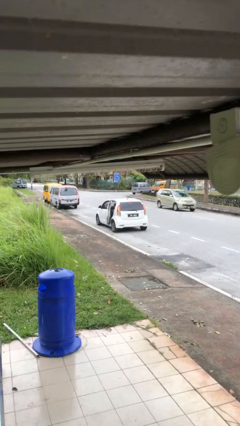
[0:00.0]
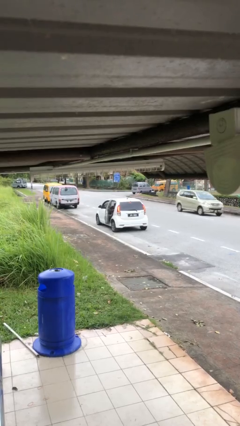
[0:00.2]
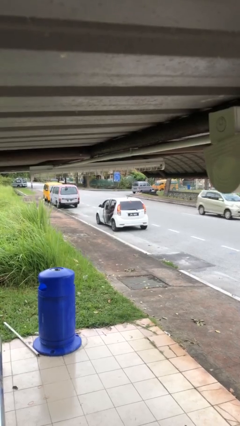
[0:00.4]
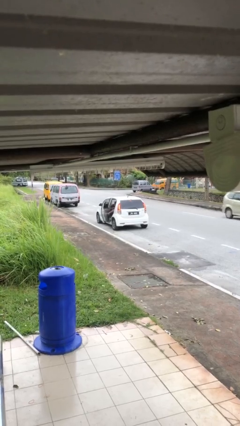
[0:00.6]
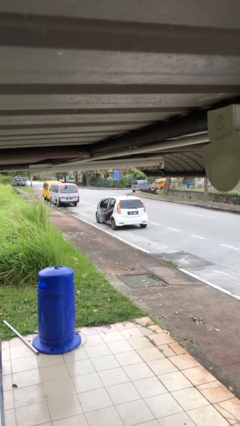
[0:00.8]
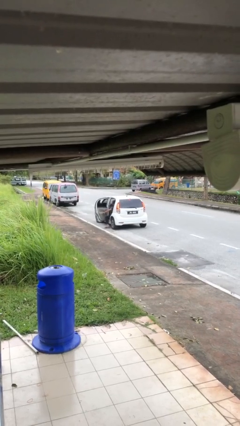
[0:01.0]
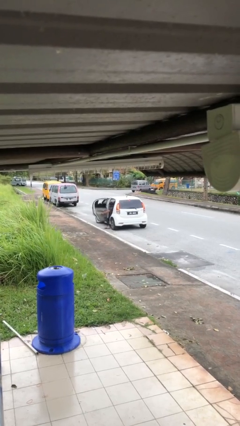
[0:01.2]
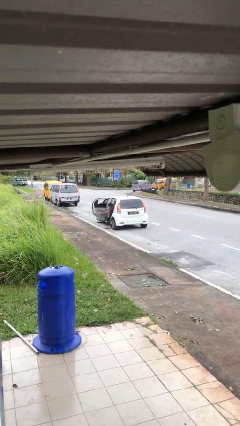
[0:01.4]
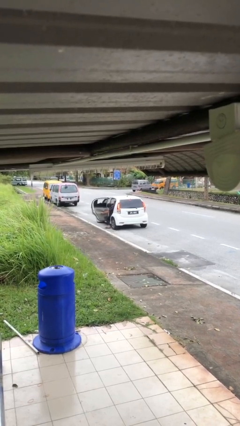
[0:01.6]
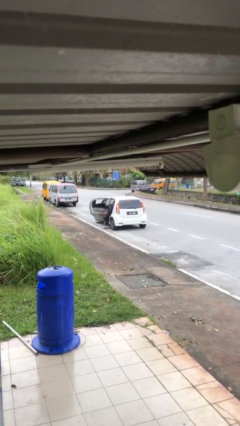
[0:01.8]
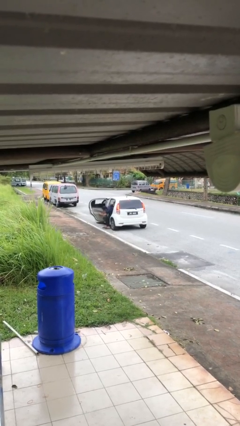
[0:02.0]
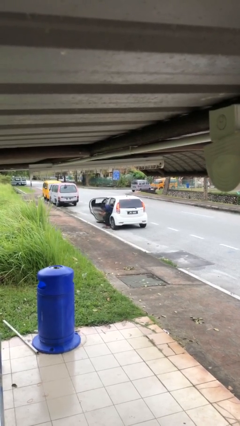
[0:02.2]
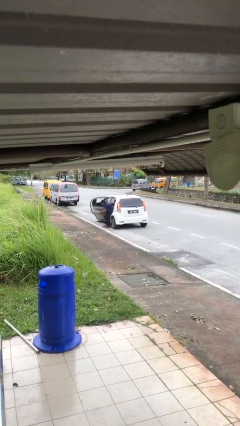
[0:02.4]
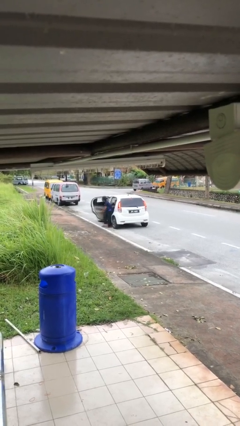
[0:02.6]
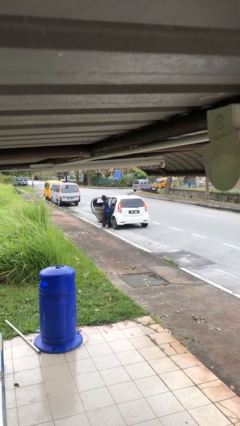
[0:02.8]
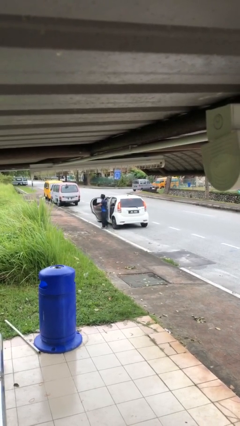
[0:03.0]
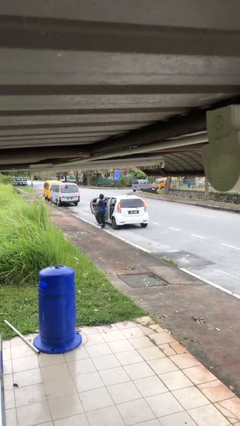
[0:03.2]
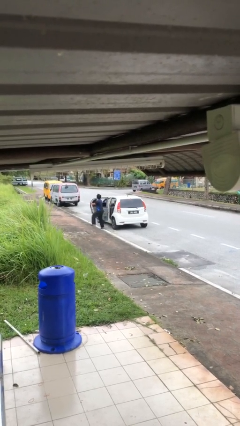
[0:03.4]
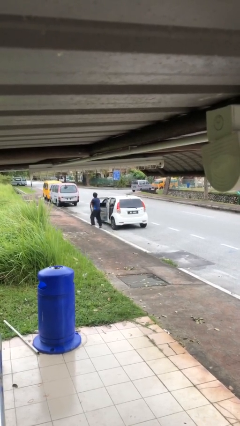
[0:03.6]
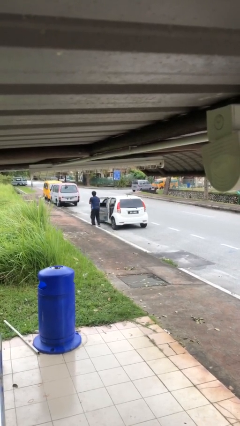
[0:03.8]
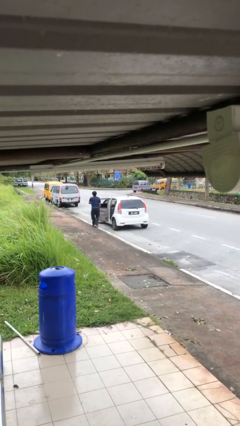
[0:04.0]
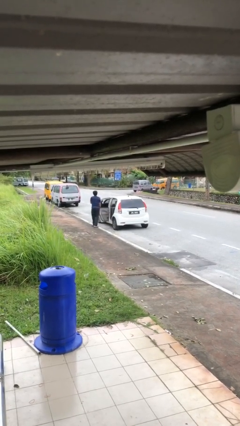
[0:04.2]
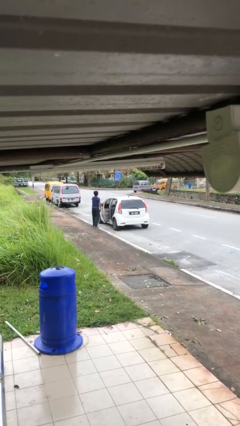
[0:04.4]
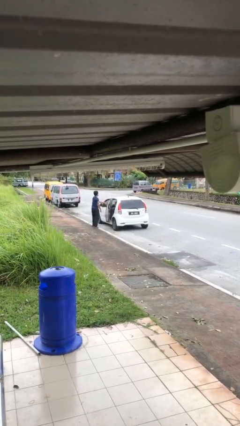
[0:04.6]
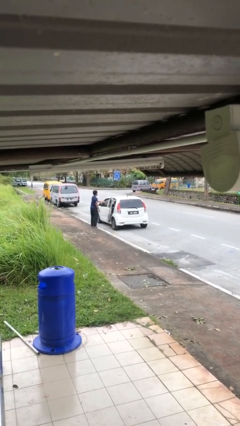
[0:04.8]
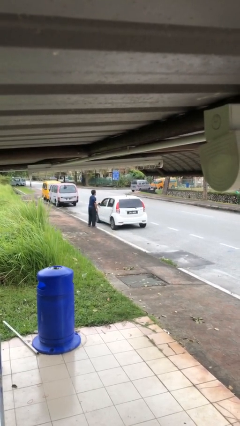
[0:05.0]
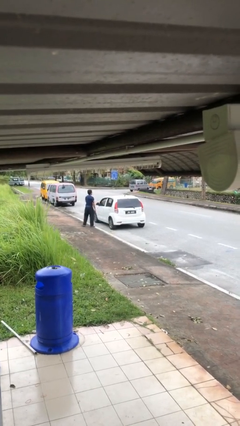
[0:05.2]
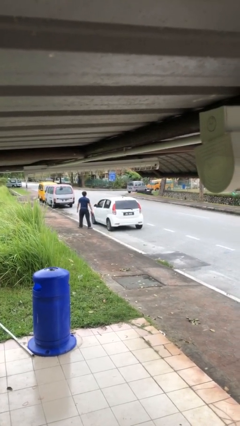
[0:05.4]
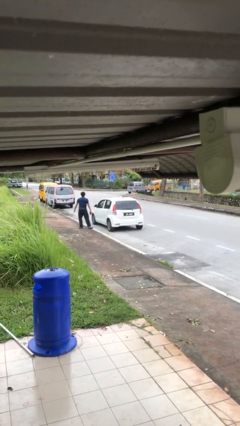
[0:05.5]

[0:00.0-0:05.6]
car drops off person

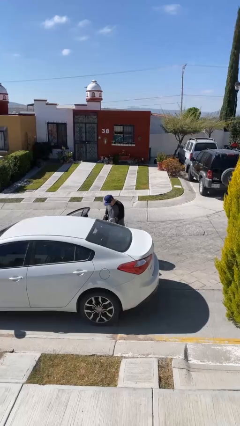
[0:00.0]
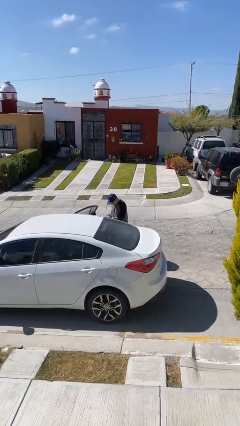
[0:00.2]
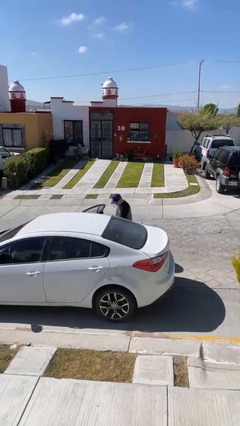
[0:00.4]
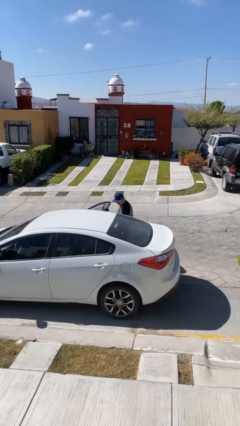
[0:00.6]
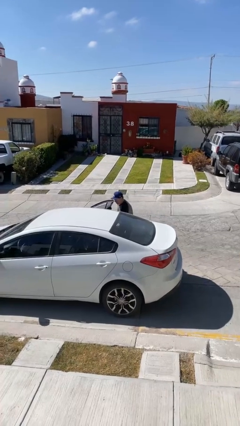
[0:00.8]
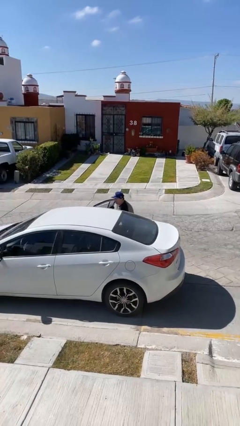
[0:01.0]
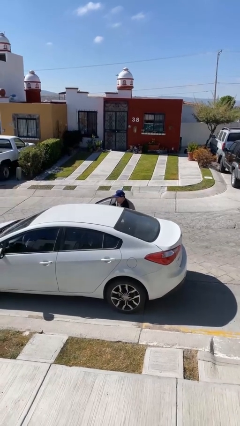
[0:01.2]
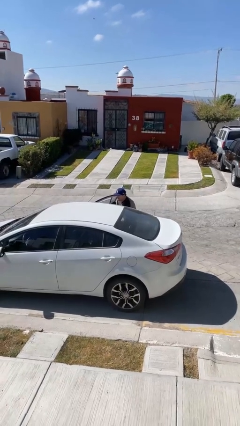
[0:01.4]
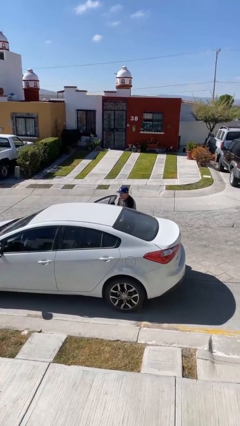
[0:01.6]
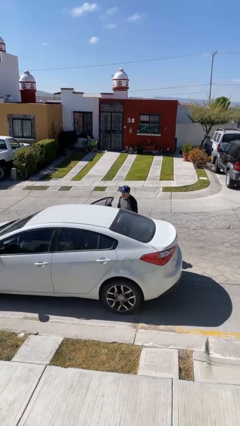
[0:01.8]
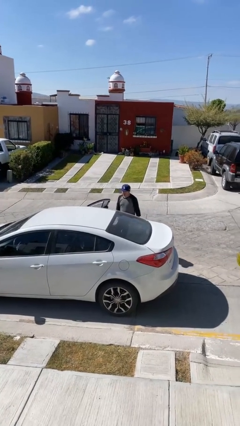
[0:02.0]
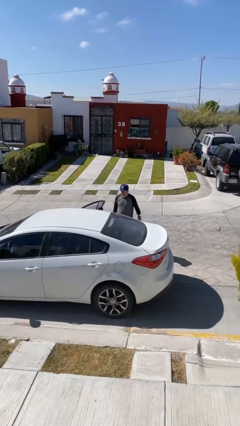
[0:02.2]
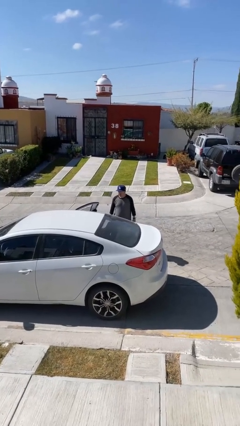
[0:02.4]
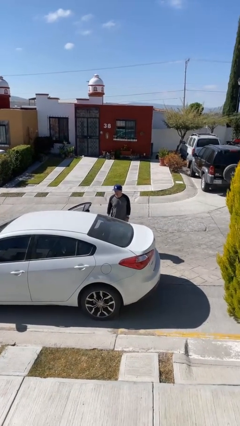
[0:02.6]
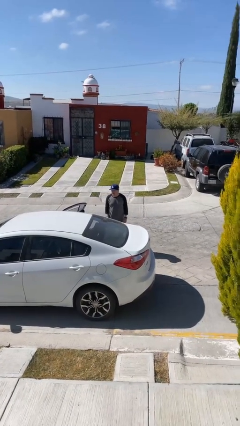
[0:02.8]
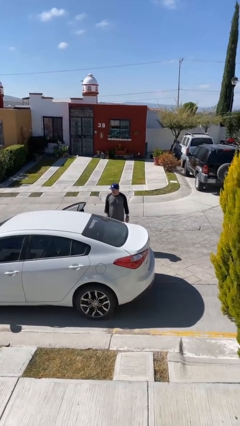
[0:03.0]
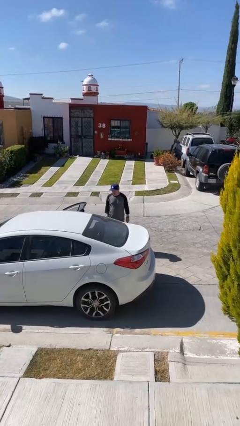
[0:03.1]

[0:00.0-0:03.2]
person loads car

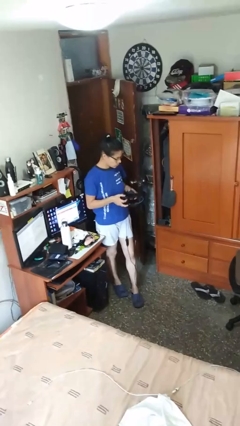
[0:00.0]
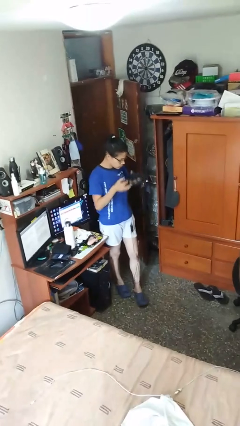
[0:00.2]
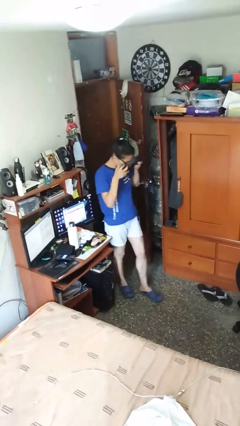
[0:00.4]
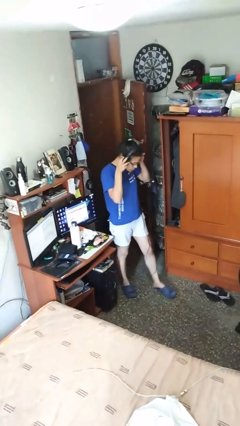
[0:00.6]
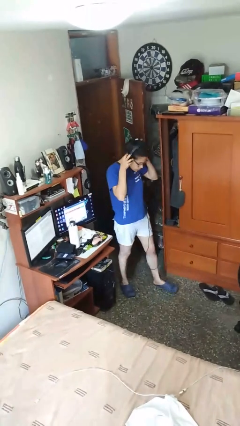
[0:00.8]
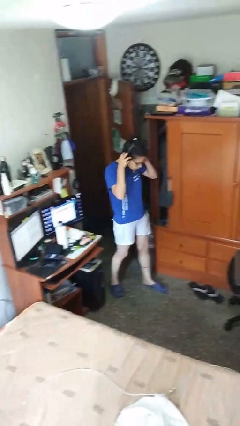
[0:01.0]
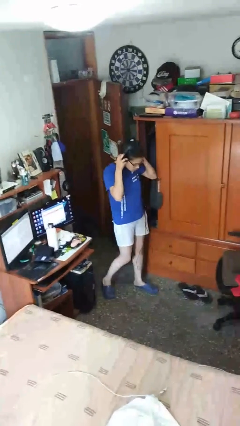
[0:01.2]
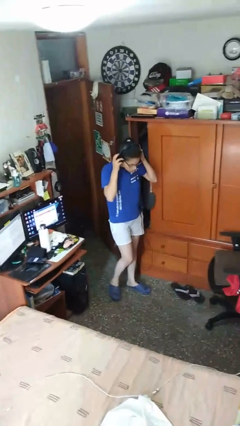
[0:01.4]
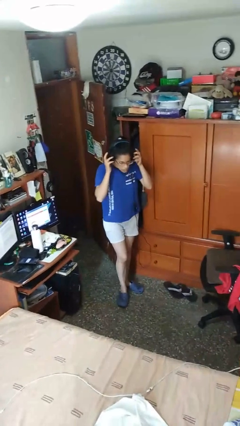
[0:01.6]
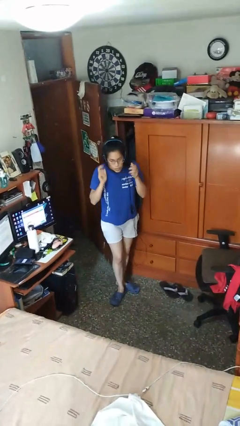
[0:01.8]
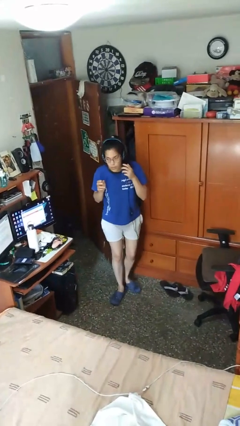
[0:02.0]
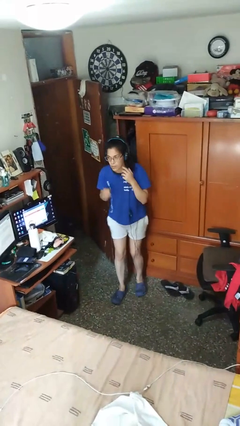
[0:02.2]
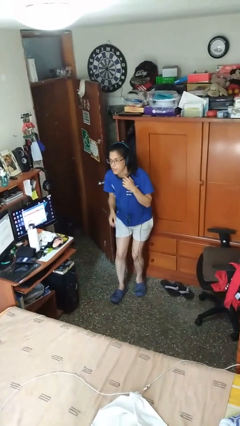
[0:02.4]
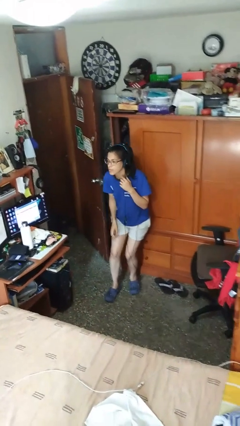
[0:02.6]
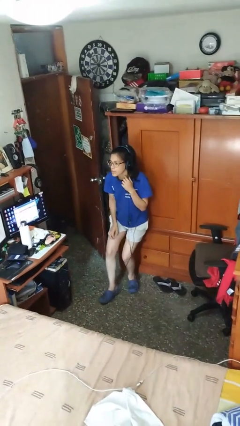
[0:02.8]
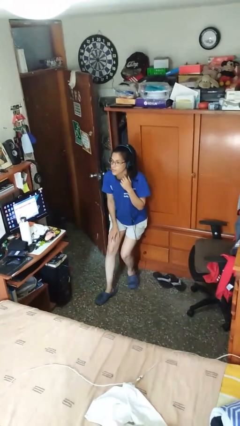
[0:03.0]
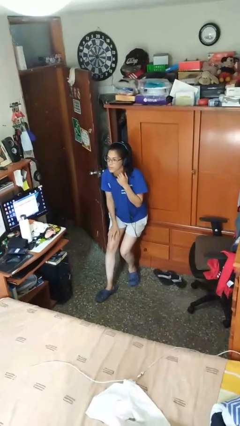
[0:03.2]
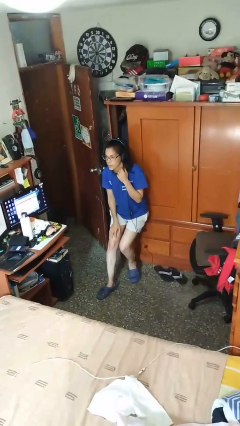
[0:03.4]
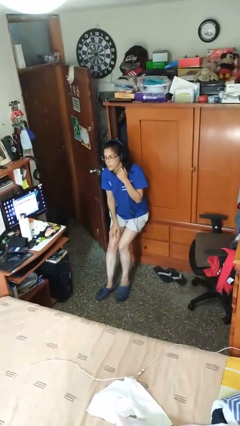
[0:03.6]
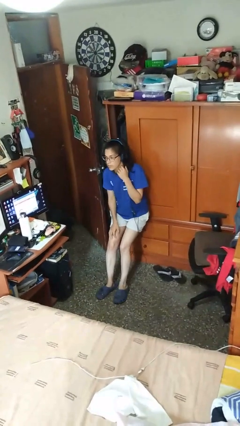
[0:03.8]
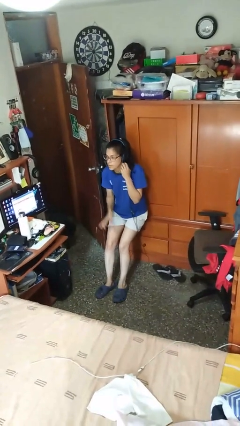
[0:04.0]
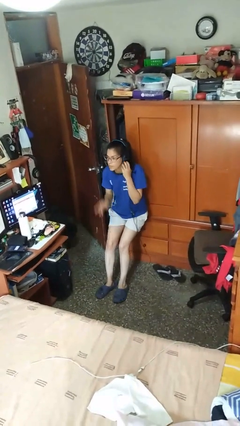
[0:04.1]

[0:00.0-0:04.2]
person puts on headphones

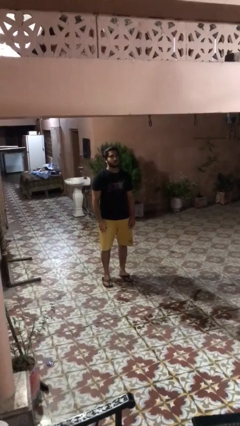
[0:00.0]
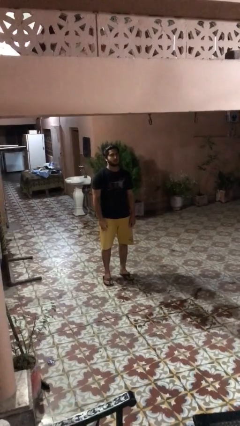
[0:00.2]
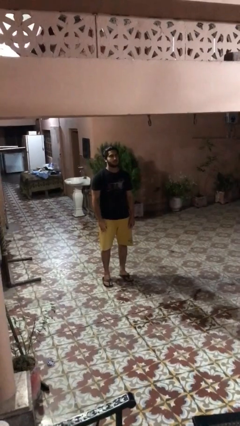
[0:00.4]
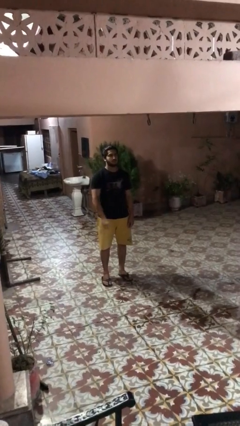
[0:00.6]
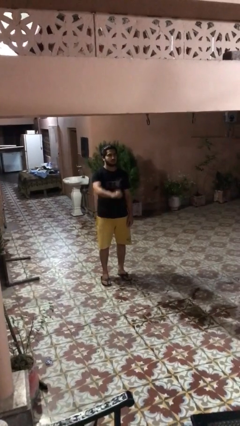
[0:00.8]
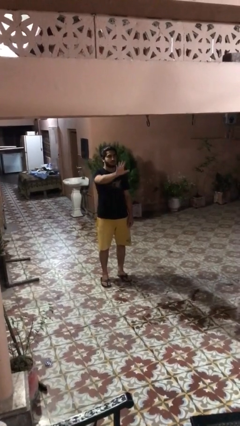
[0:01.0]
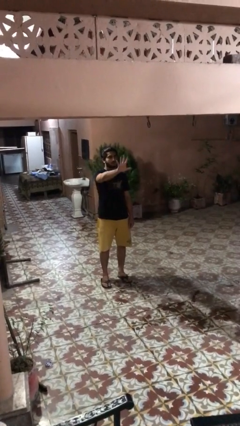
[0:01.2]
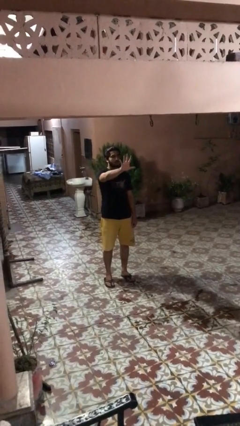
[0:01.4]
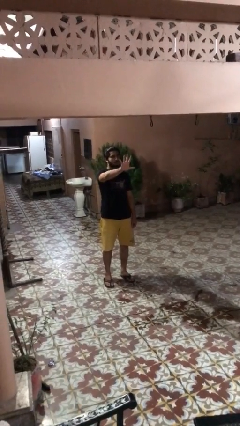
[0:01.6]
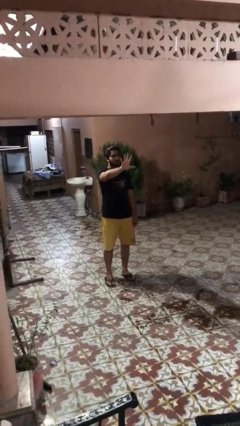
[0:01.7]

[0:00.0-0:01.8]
person gestures number five

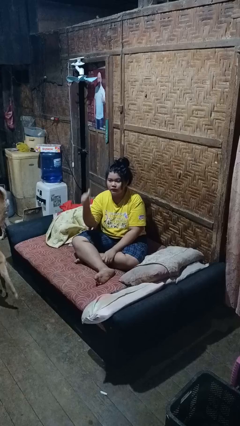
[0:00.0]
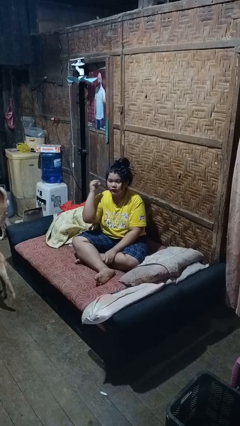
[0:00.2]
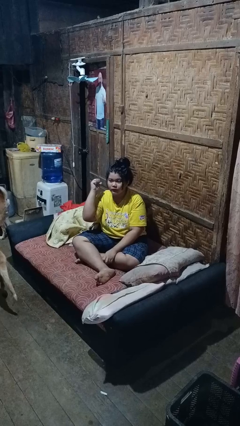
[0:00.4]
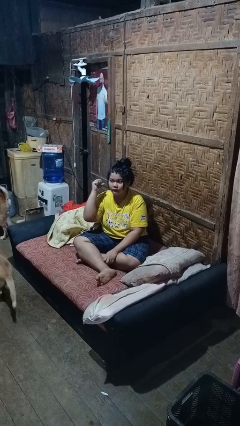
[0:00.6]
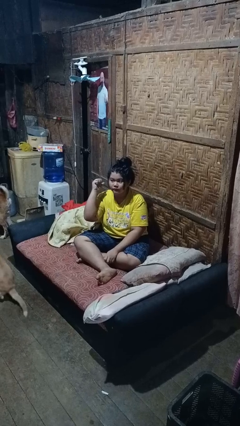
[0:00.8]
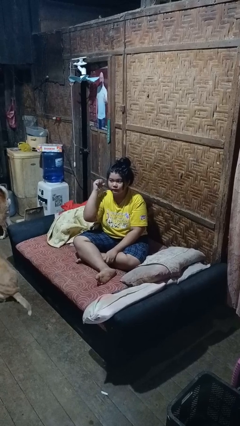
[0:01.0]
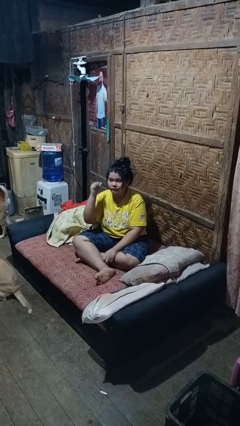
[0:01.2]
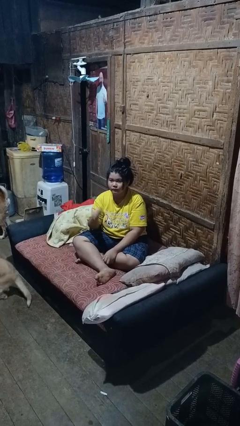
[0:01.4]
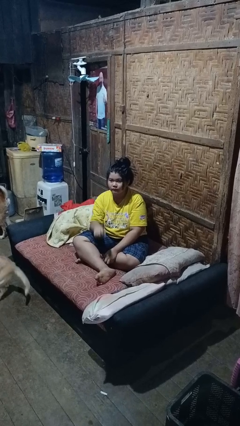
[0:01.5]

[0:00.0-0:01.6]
person gestures behind me

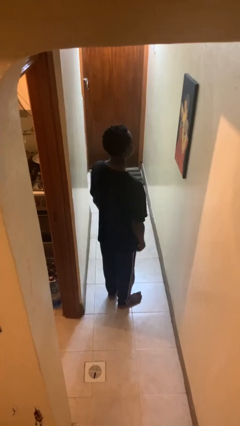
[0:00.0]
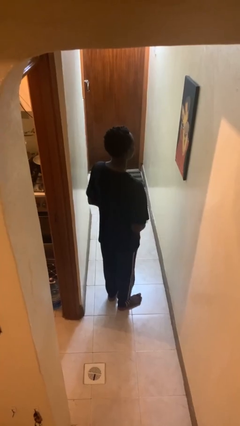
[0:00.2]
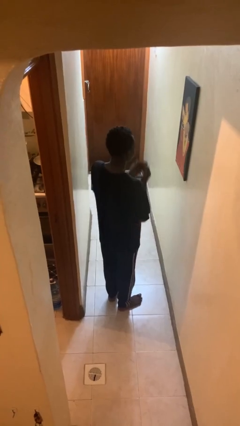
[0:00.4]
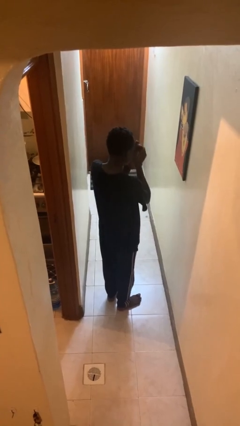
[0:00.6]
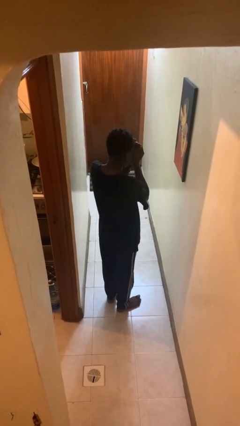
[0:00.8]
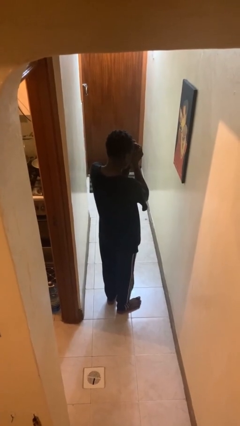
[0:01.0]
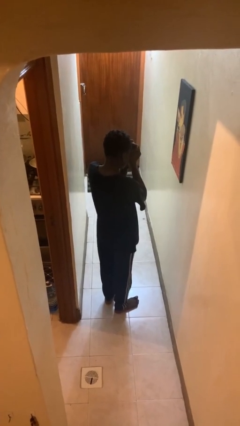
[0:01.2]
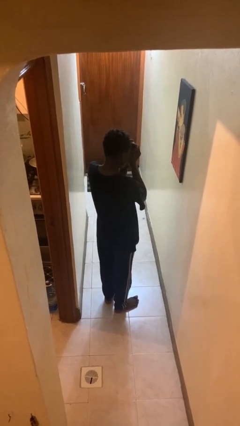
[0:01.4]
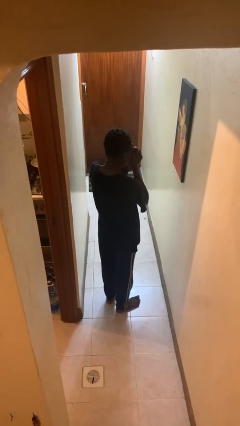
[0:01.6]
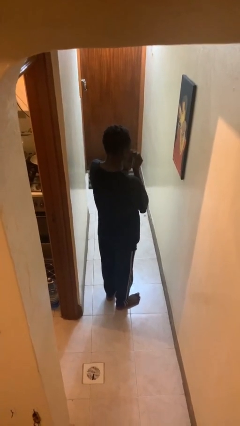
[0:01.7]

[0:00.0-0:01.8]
person shades eyes
